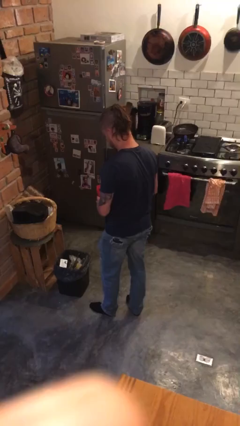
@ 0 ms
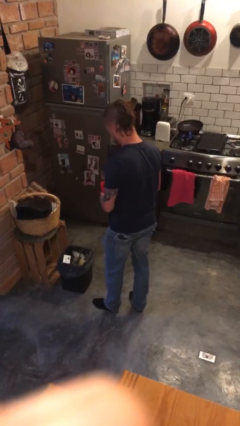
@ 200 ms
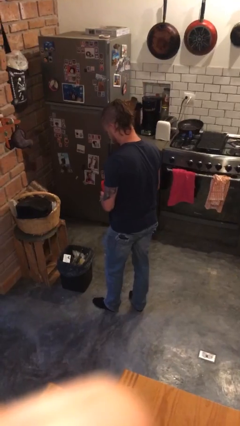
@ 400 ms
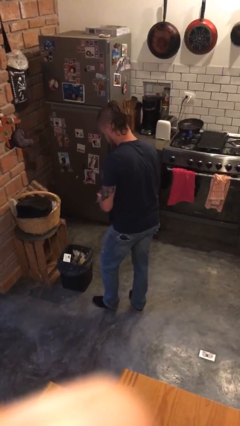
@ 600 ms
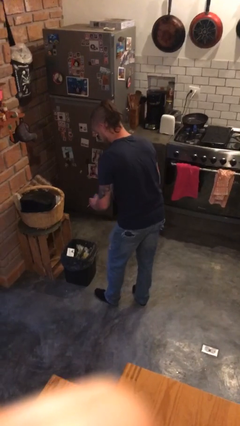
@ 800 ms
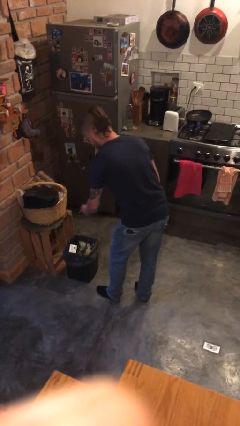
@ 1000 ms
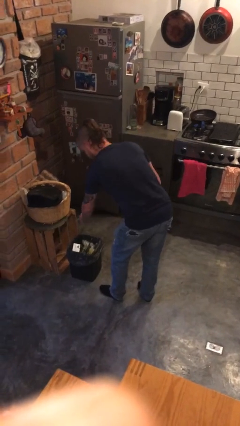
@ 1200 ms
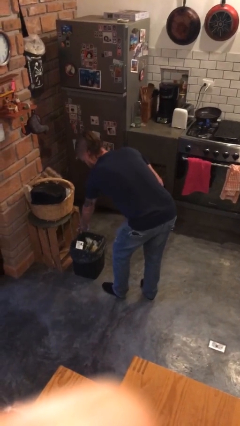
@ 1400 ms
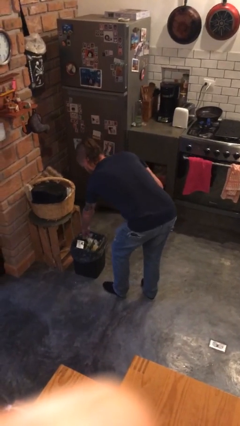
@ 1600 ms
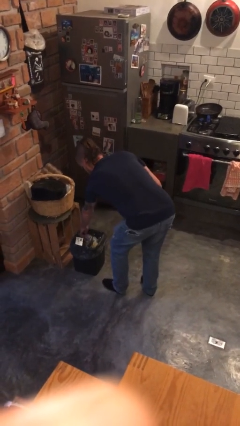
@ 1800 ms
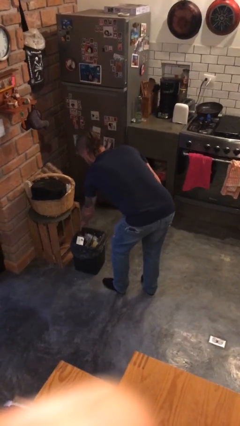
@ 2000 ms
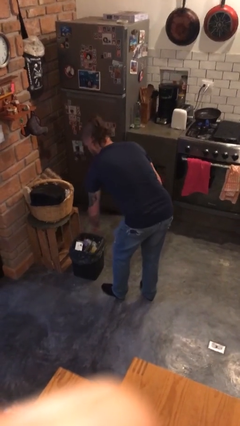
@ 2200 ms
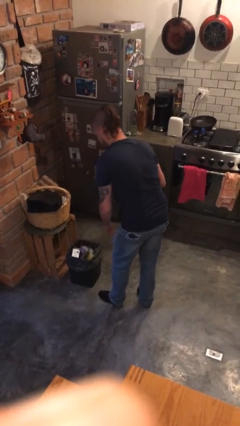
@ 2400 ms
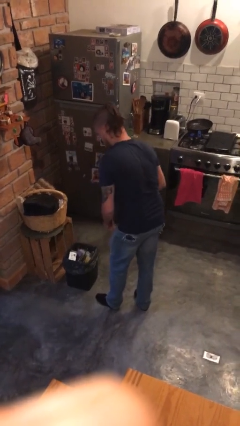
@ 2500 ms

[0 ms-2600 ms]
person discards trash

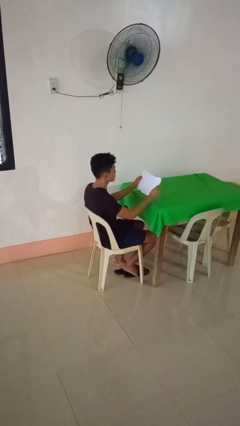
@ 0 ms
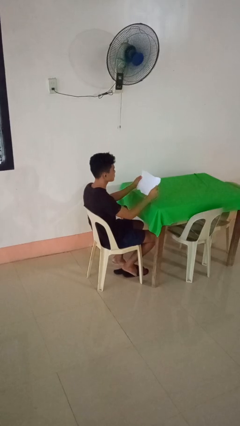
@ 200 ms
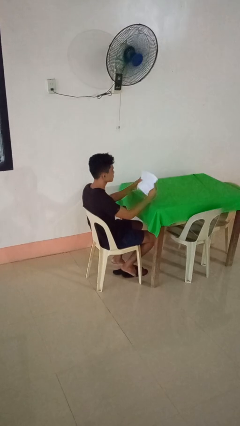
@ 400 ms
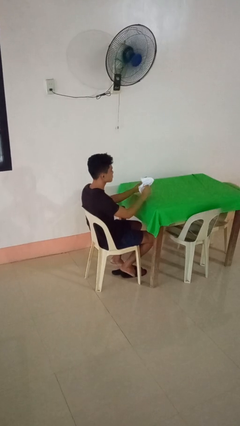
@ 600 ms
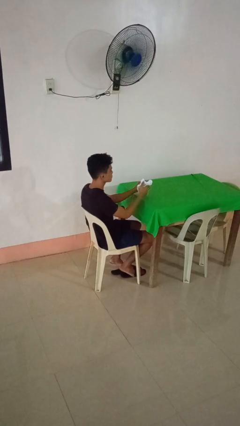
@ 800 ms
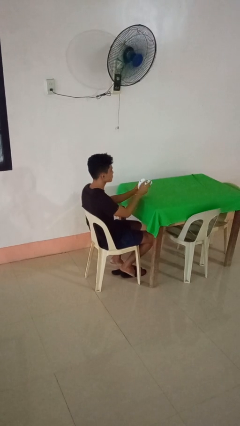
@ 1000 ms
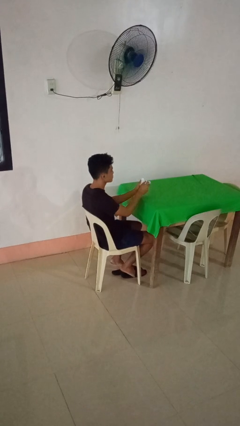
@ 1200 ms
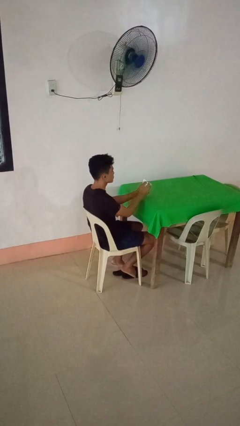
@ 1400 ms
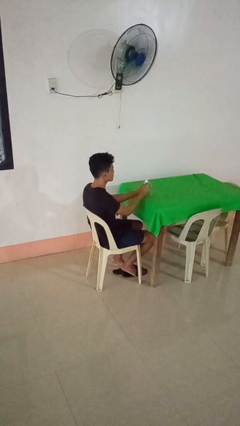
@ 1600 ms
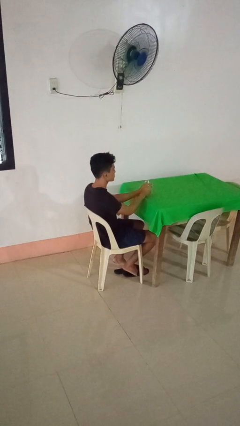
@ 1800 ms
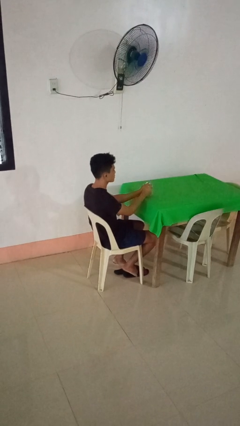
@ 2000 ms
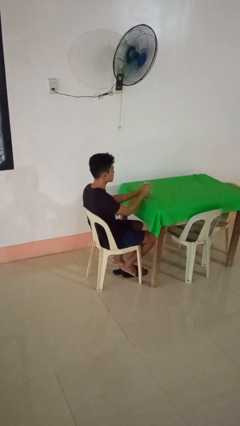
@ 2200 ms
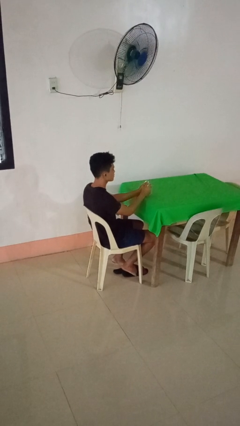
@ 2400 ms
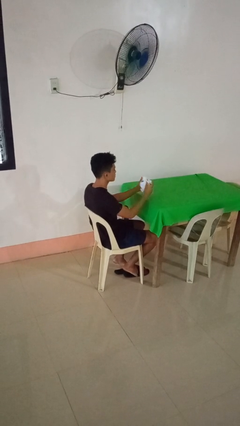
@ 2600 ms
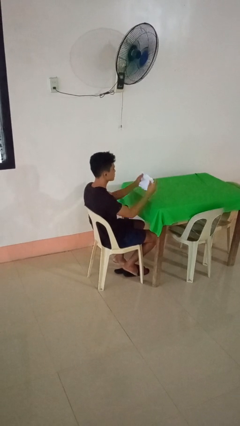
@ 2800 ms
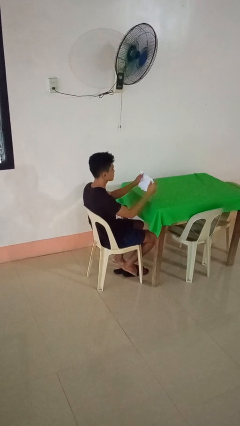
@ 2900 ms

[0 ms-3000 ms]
person crumples paper

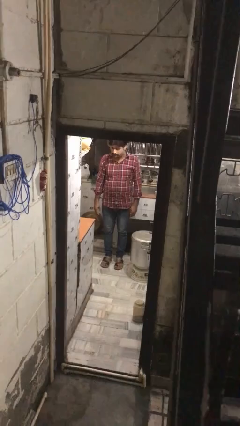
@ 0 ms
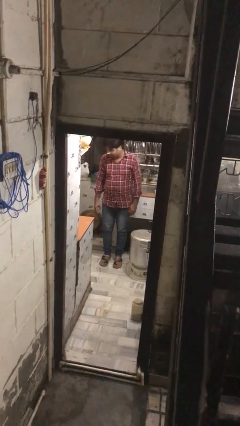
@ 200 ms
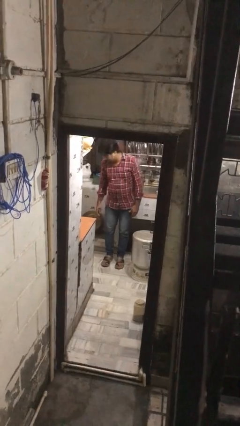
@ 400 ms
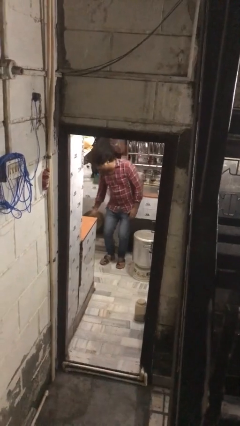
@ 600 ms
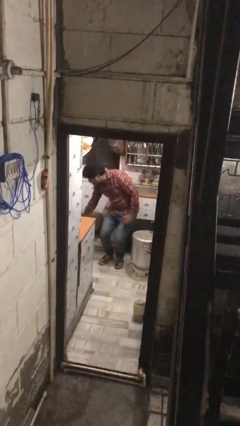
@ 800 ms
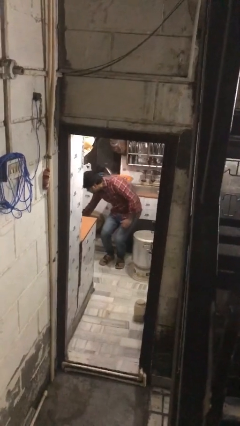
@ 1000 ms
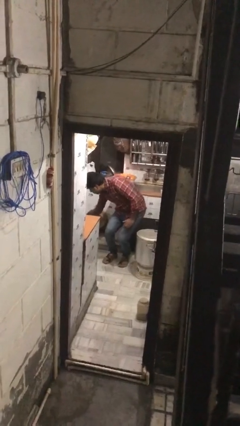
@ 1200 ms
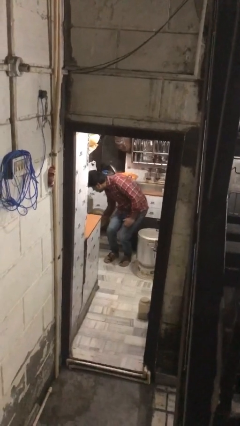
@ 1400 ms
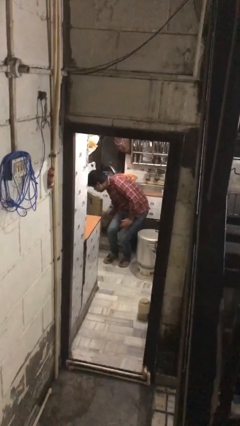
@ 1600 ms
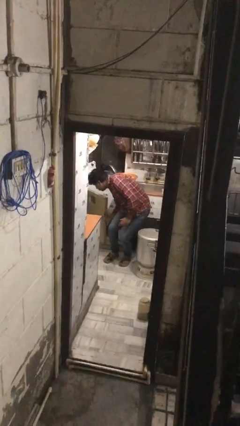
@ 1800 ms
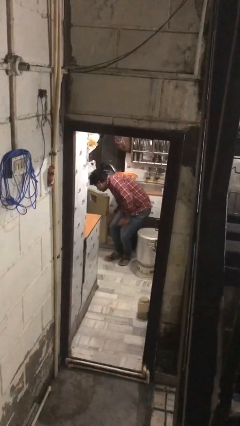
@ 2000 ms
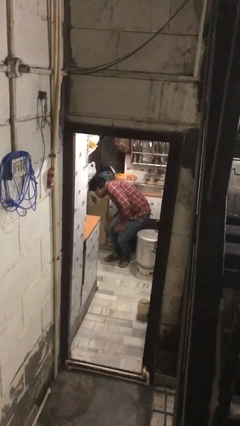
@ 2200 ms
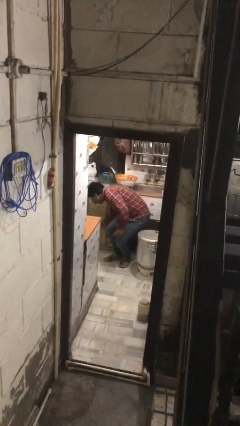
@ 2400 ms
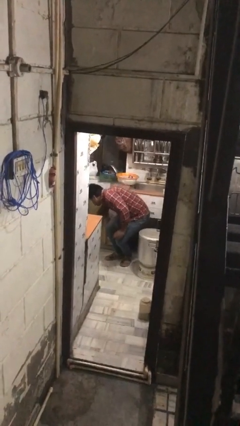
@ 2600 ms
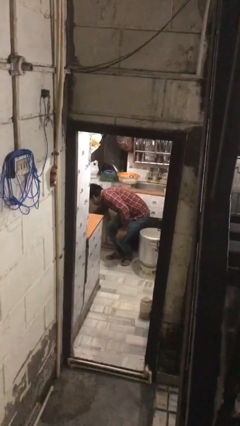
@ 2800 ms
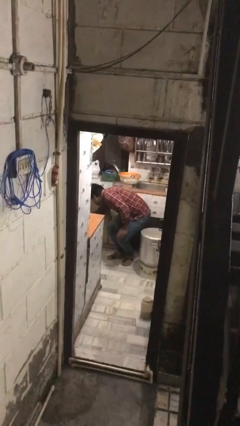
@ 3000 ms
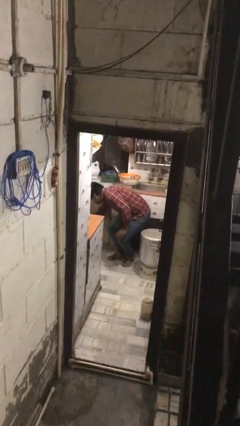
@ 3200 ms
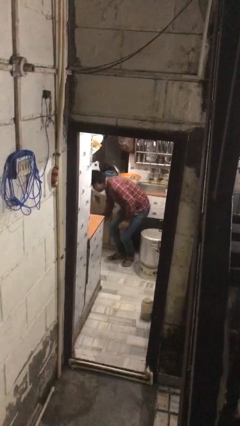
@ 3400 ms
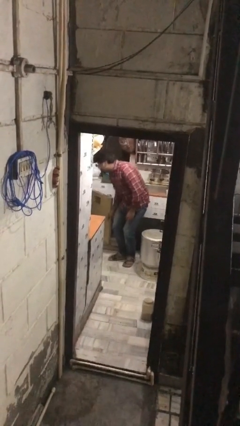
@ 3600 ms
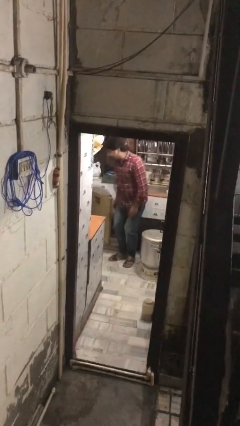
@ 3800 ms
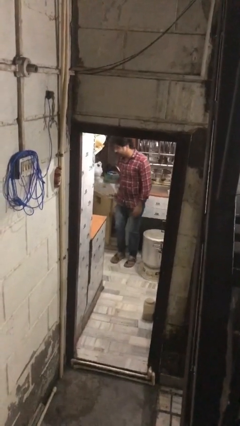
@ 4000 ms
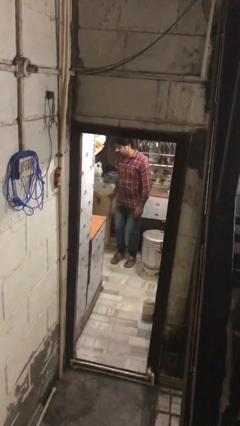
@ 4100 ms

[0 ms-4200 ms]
person searches in kitchen drawer

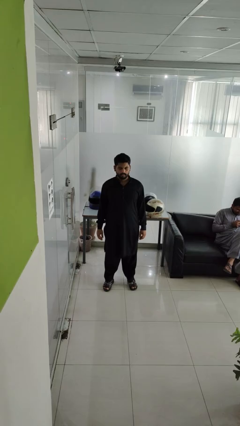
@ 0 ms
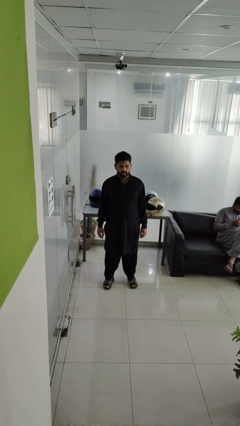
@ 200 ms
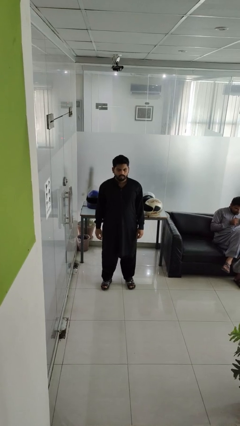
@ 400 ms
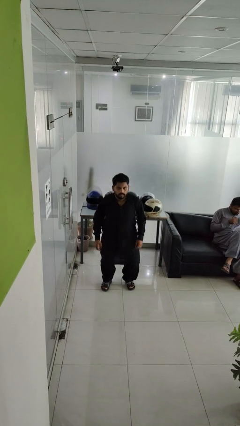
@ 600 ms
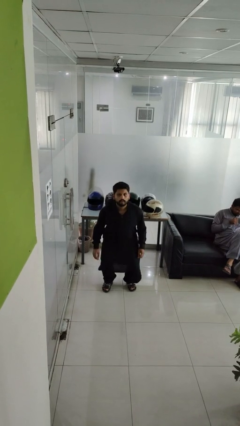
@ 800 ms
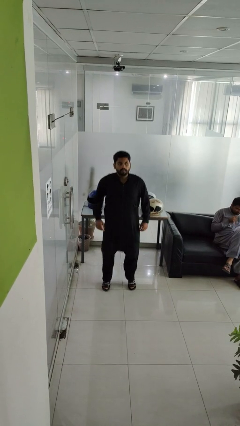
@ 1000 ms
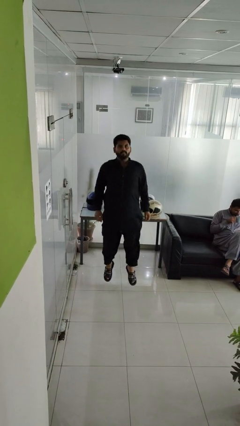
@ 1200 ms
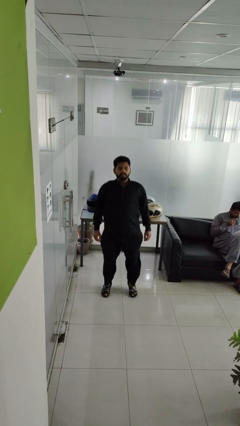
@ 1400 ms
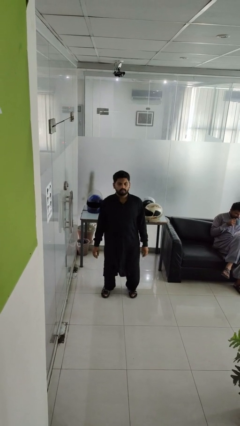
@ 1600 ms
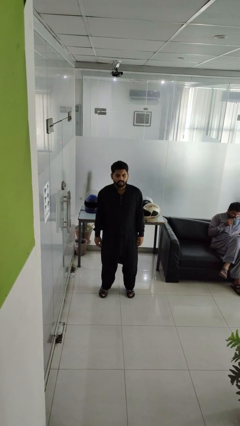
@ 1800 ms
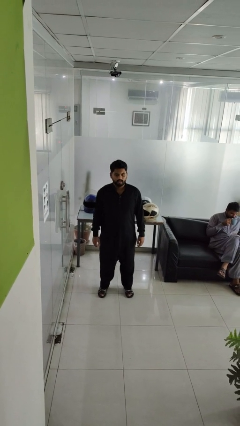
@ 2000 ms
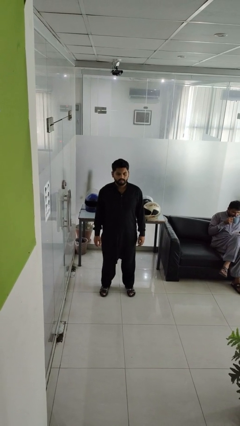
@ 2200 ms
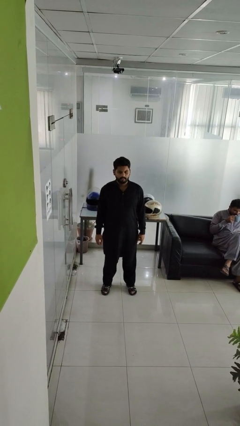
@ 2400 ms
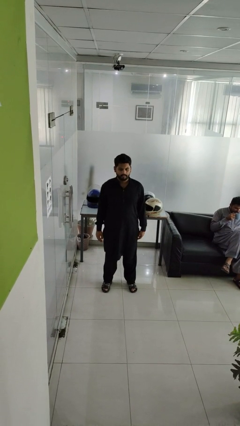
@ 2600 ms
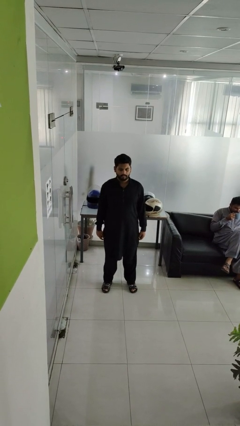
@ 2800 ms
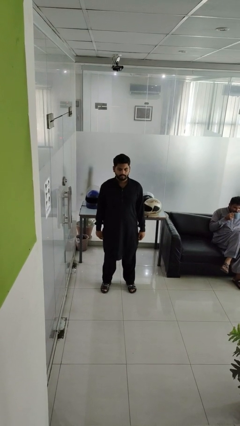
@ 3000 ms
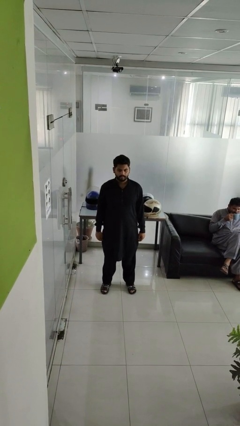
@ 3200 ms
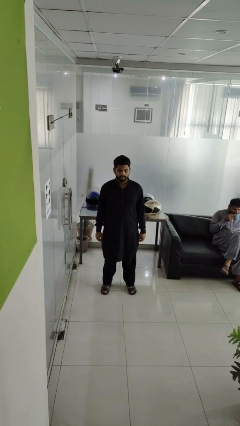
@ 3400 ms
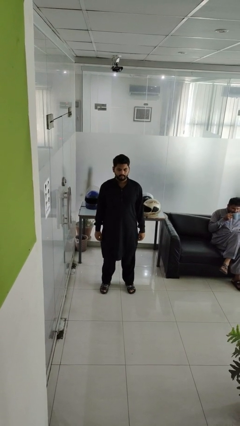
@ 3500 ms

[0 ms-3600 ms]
person jumps

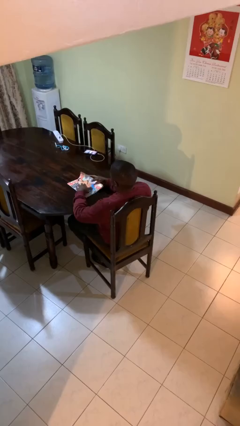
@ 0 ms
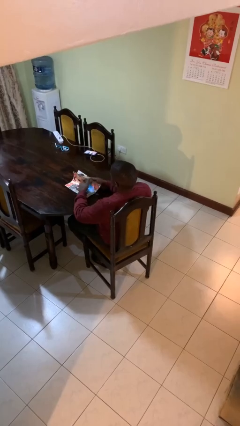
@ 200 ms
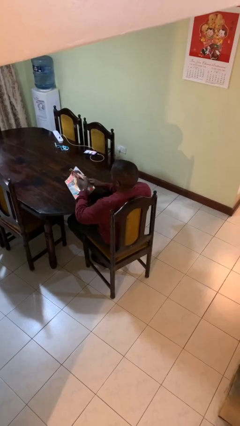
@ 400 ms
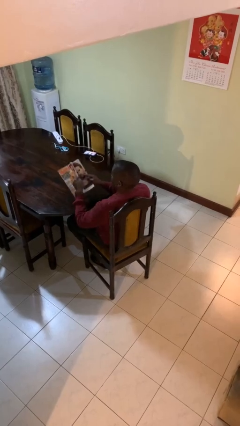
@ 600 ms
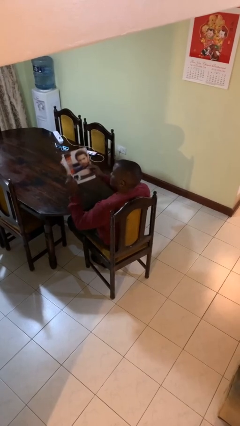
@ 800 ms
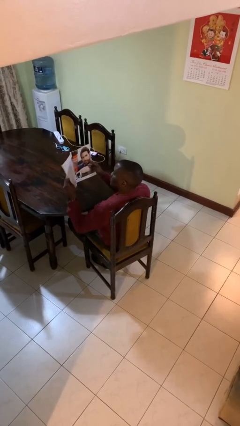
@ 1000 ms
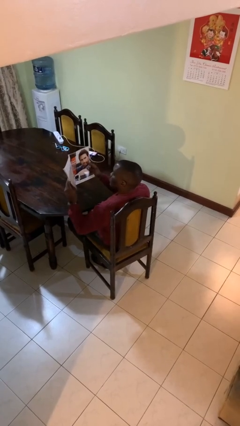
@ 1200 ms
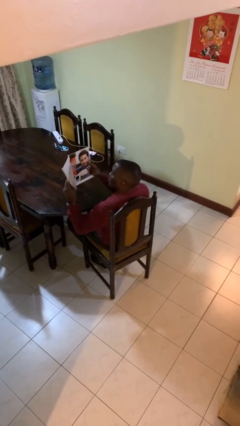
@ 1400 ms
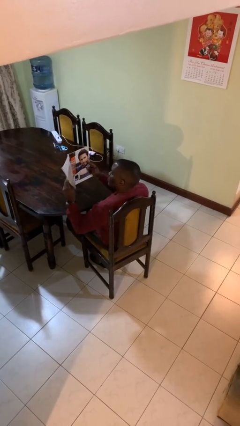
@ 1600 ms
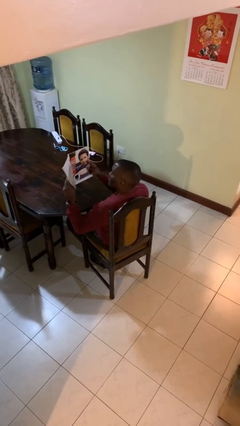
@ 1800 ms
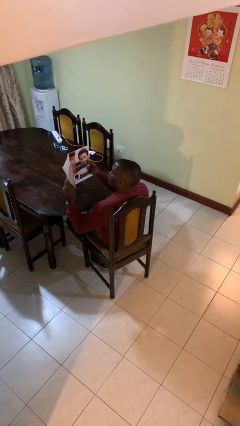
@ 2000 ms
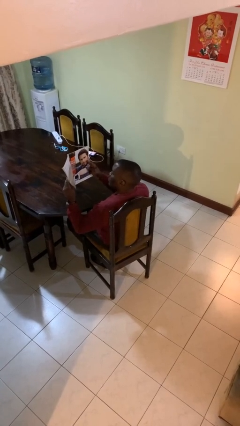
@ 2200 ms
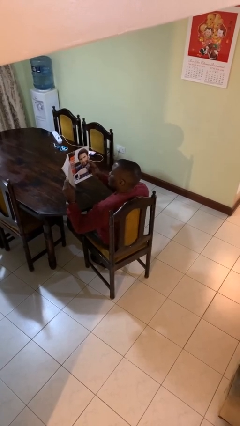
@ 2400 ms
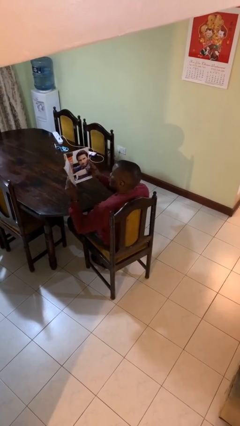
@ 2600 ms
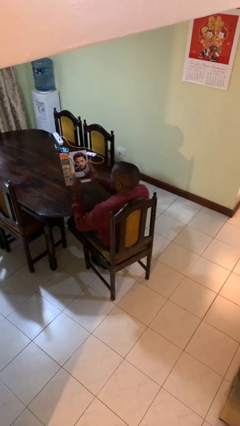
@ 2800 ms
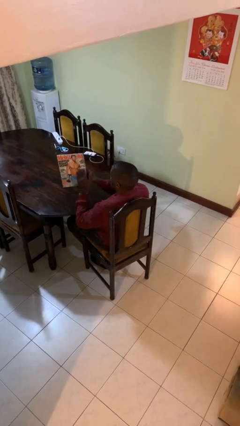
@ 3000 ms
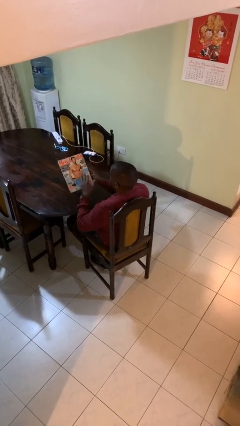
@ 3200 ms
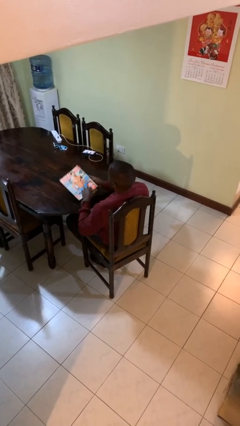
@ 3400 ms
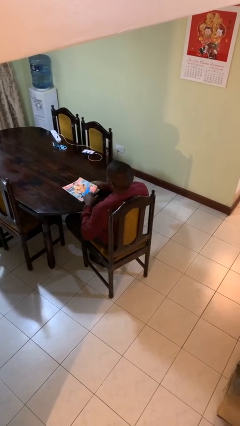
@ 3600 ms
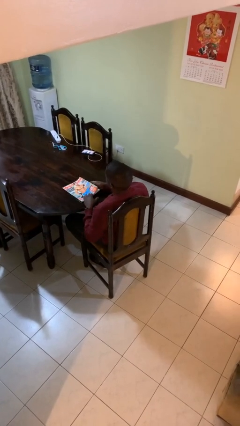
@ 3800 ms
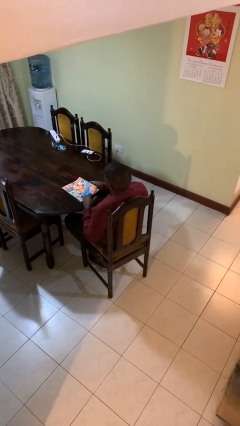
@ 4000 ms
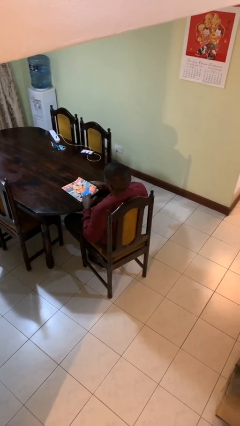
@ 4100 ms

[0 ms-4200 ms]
person reads magazine
